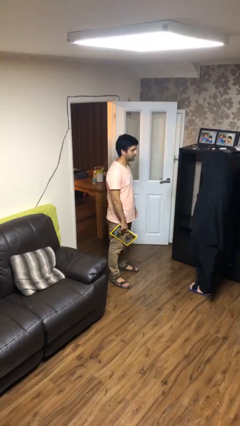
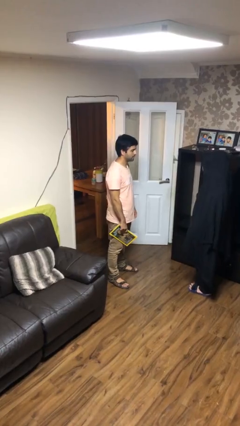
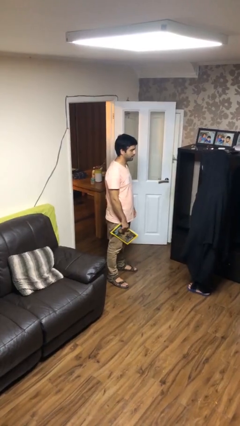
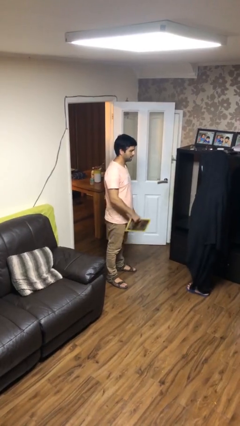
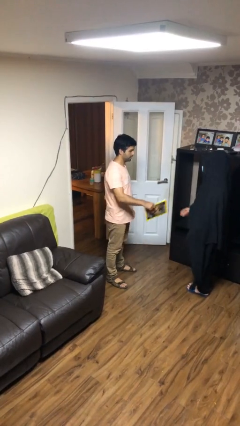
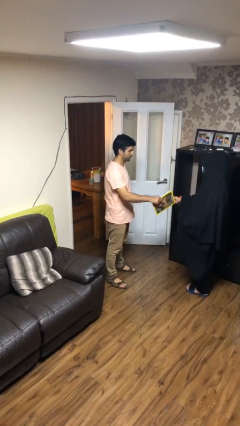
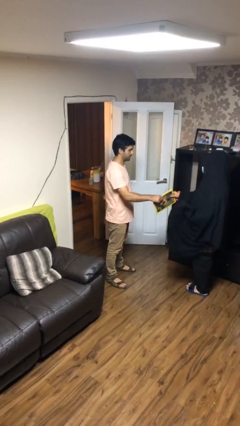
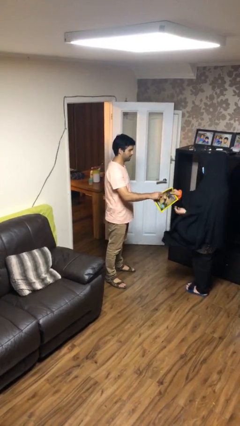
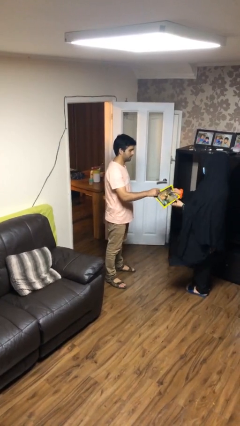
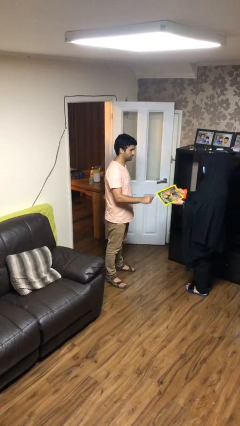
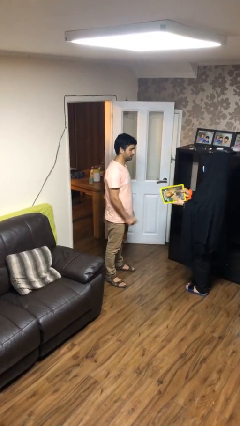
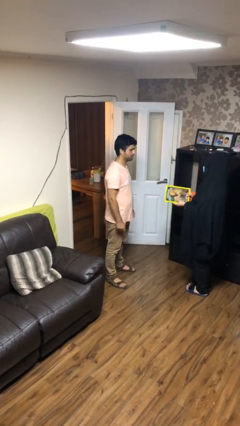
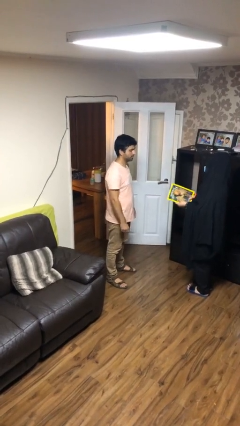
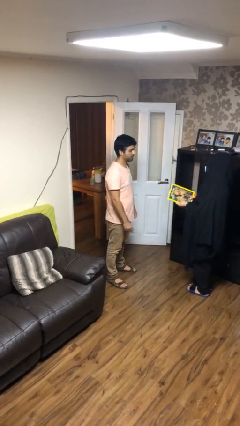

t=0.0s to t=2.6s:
person transfers object to person

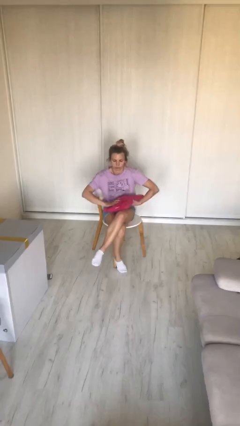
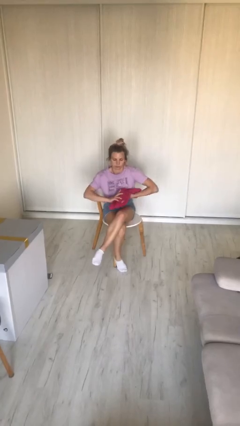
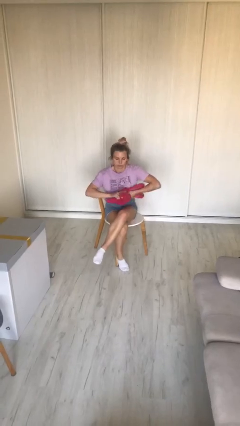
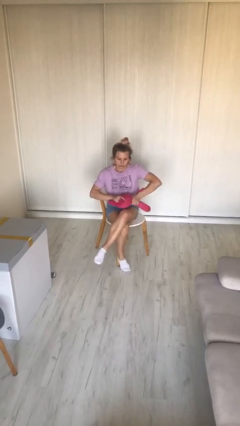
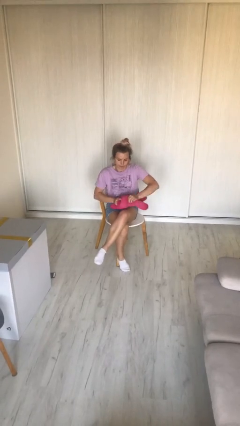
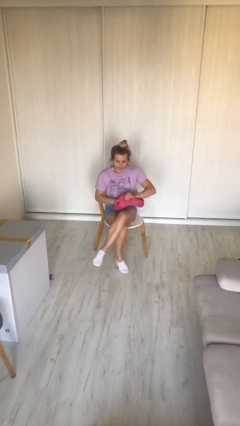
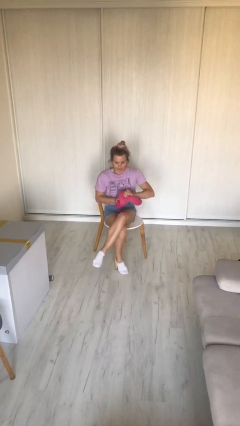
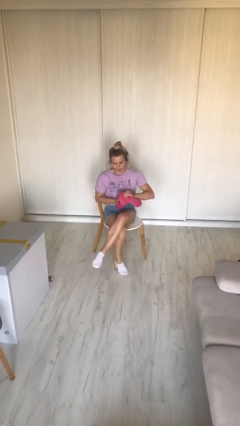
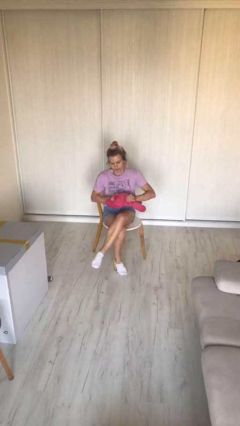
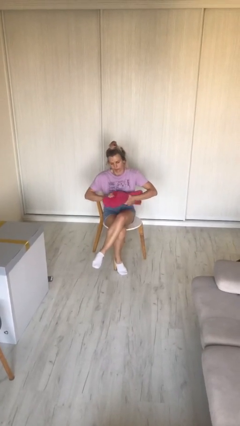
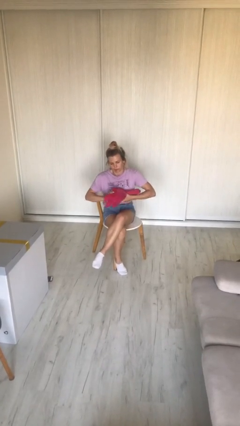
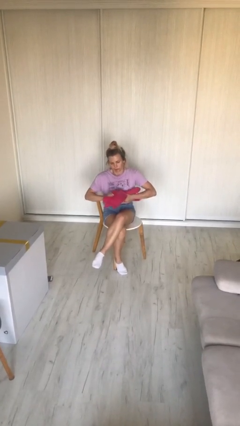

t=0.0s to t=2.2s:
person squeezes object

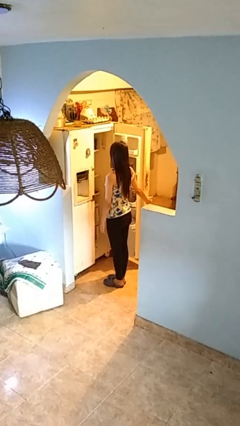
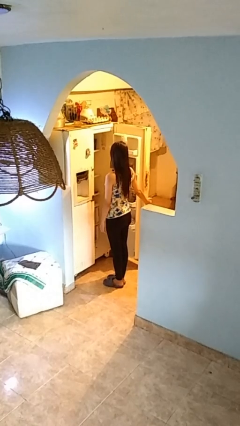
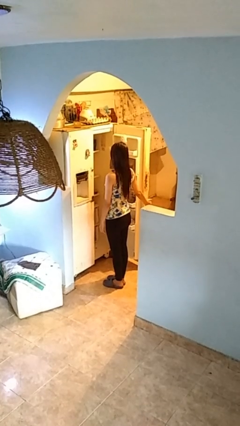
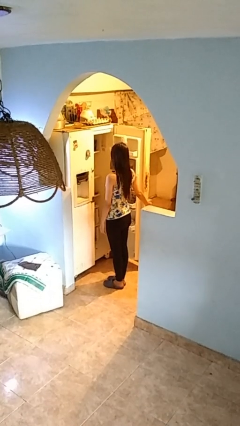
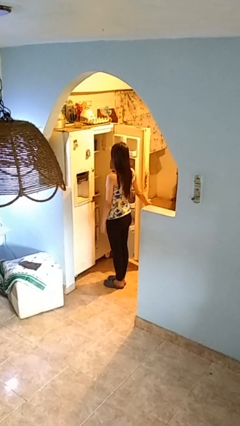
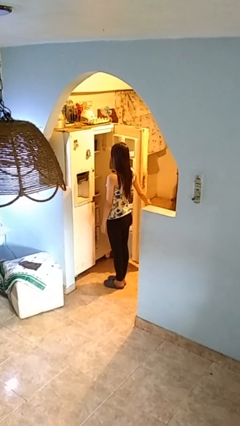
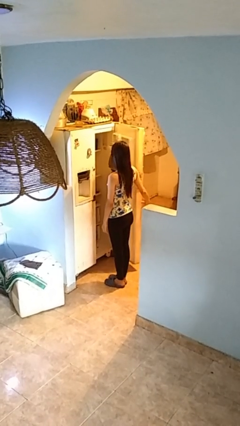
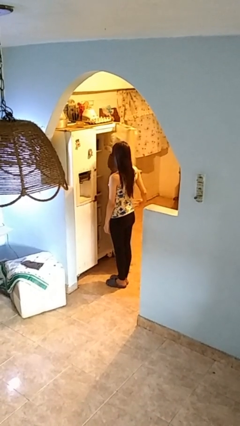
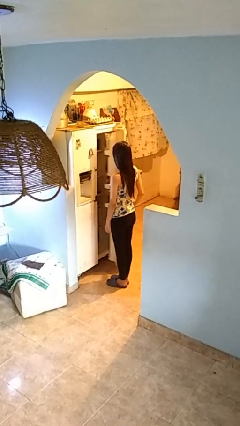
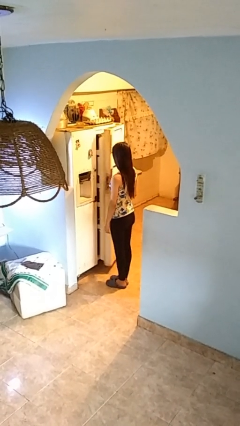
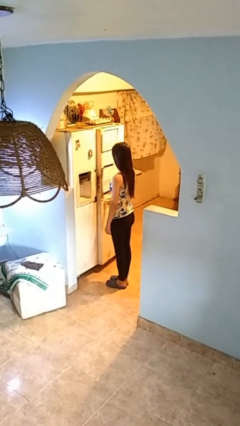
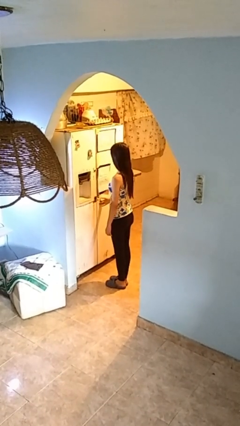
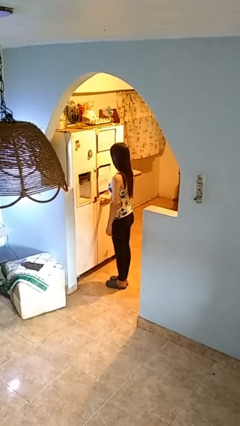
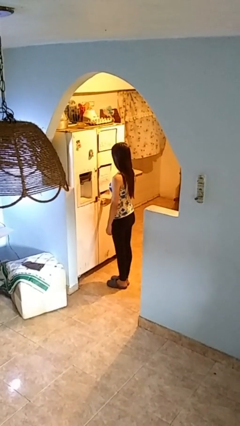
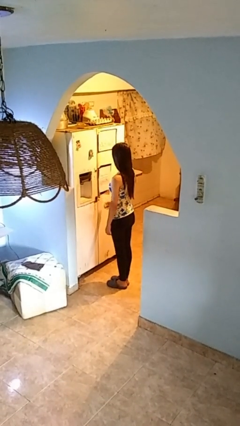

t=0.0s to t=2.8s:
person closes refrigerator

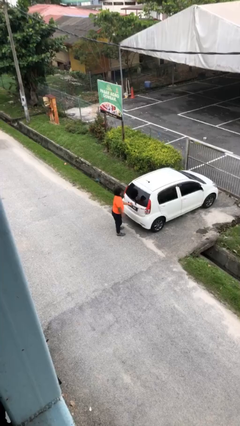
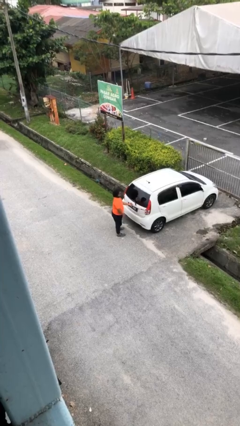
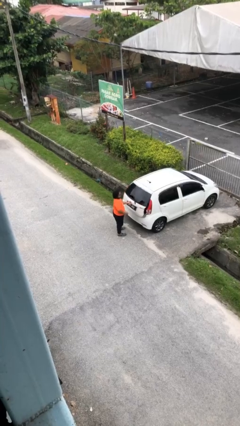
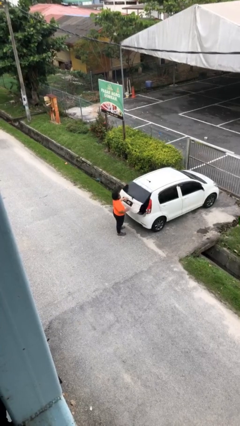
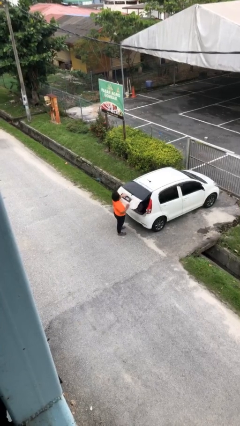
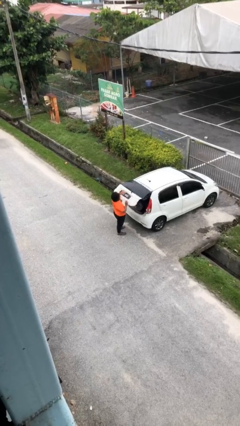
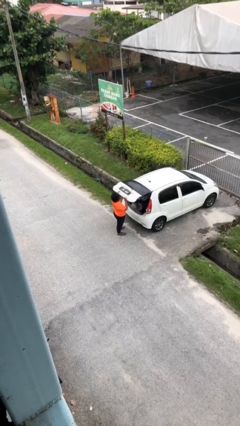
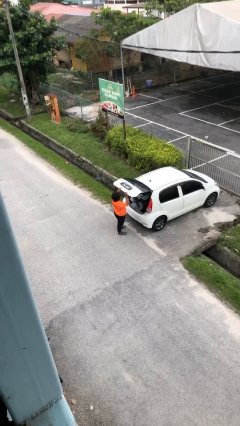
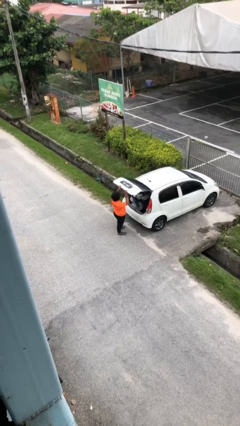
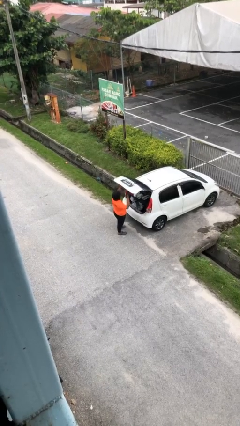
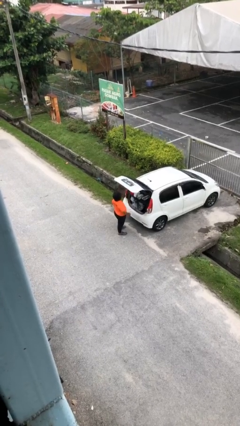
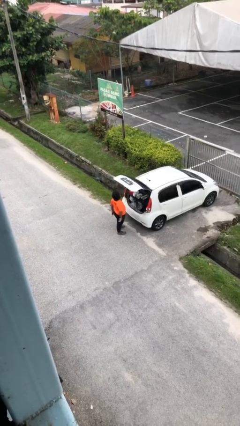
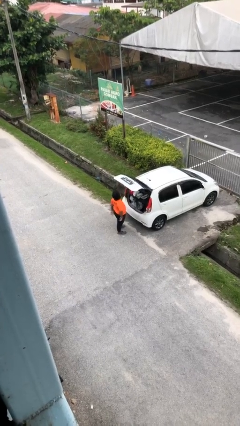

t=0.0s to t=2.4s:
person opens car trunk

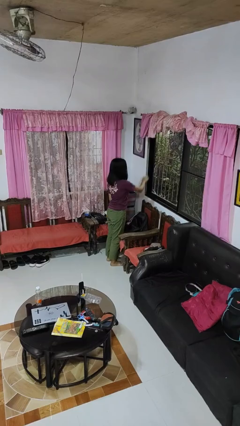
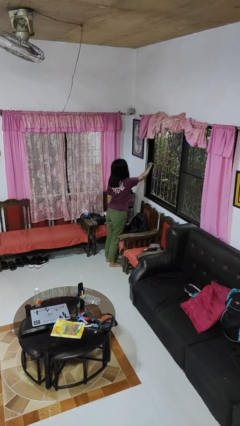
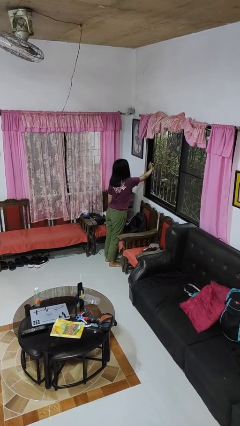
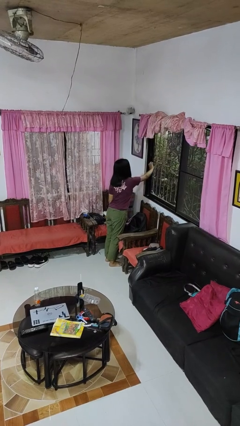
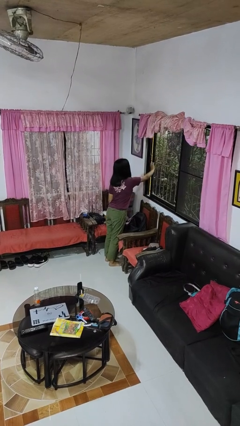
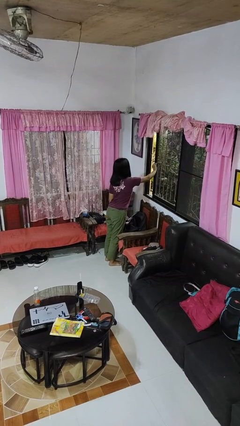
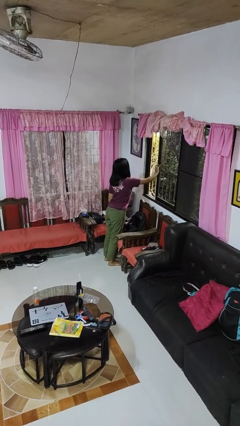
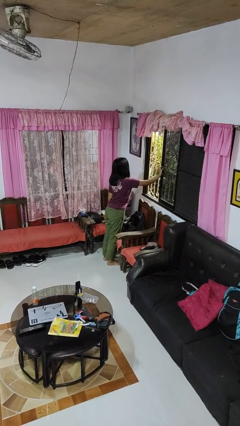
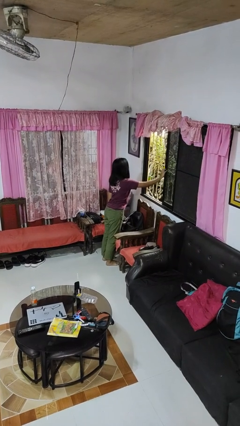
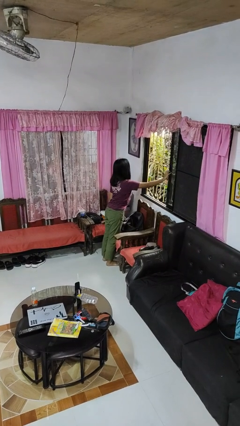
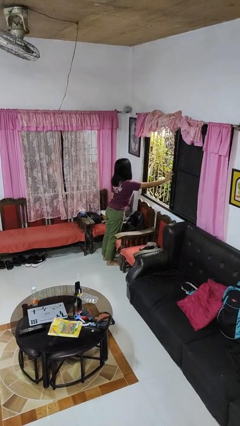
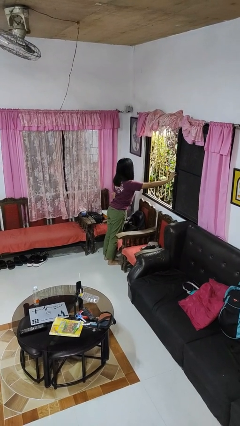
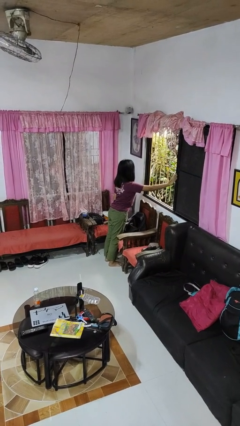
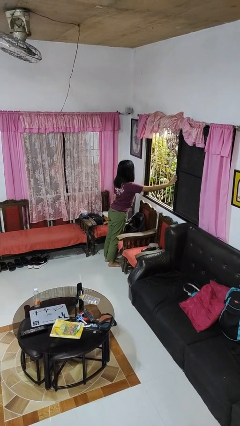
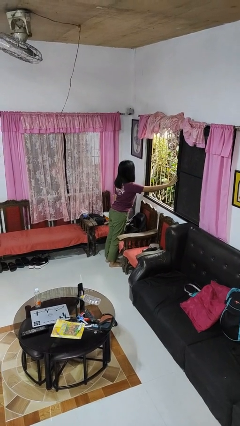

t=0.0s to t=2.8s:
person opens home window

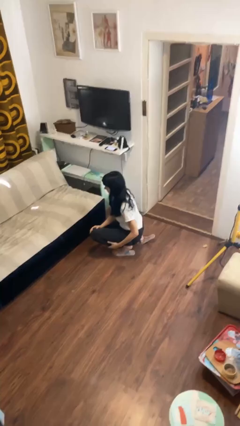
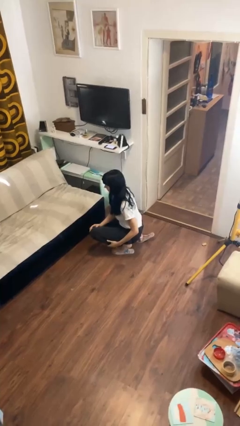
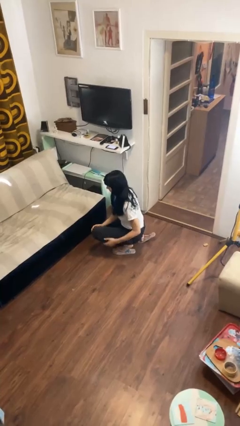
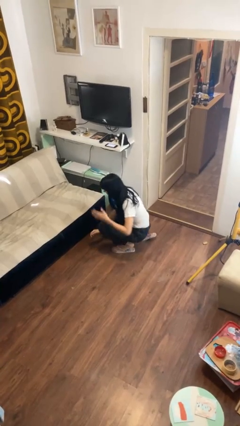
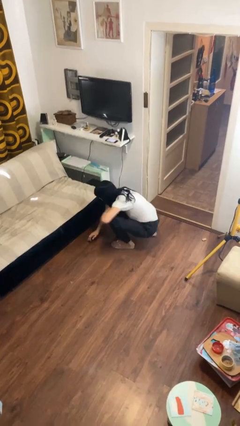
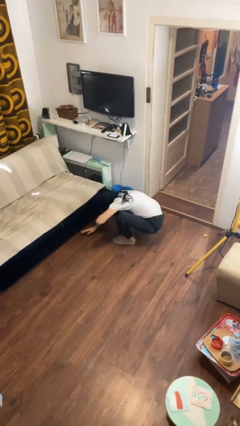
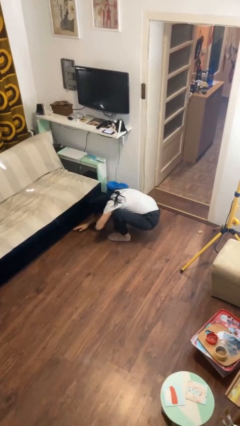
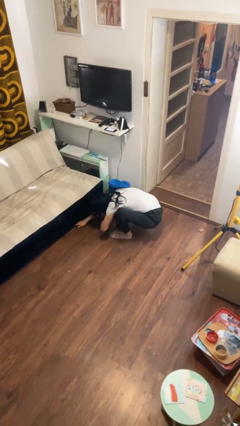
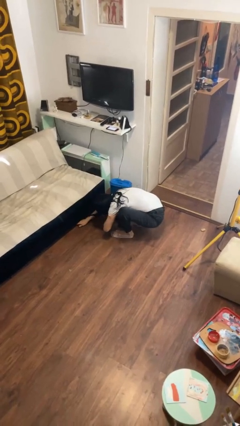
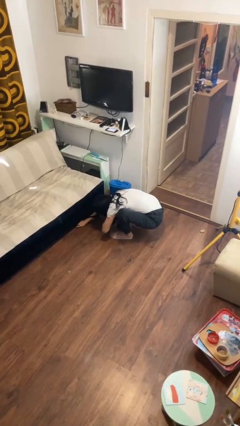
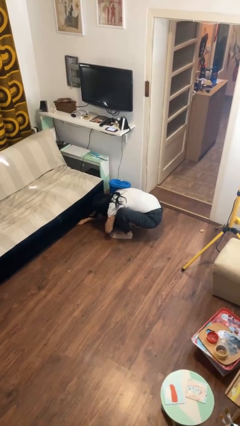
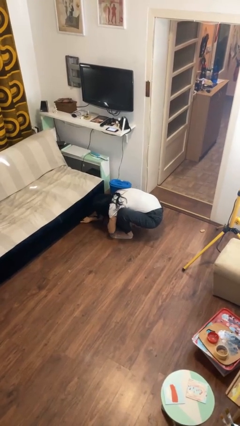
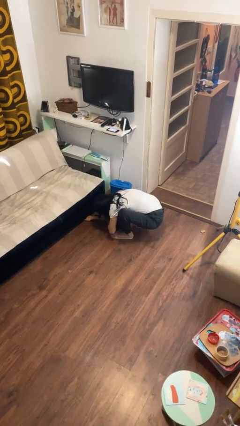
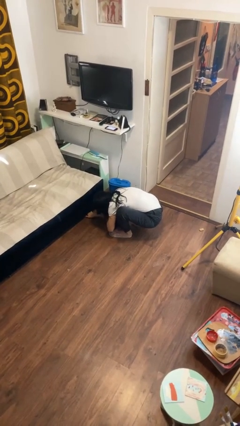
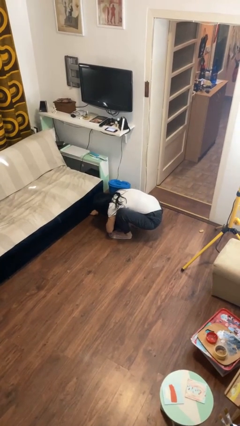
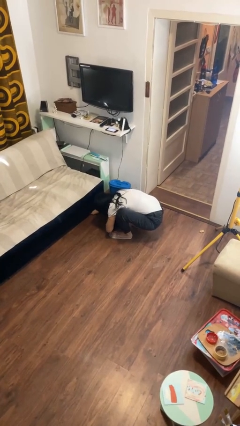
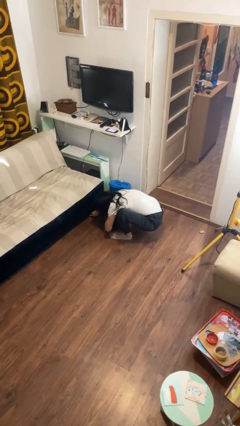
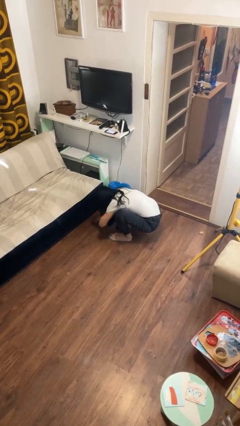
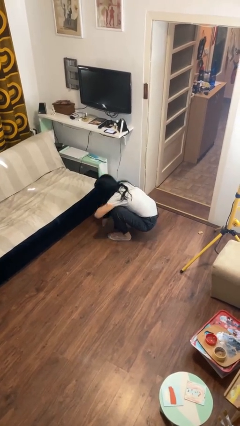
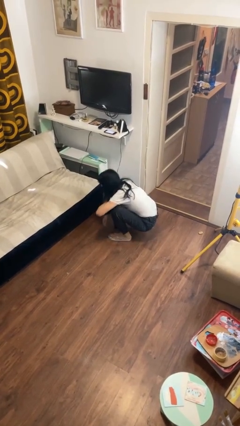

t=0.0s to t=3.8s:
person searches under couch

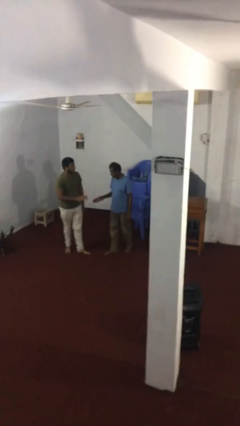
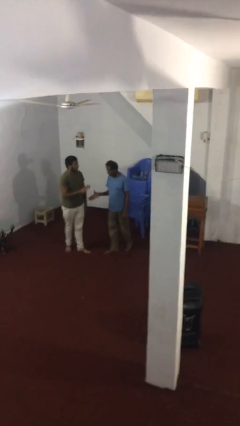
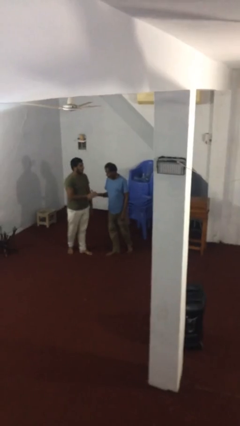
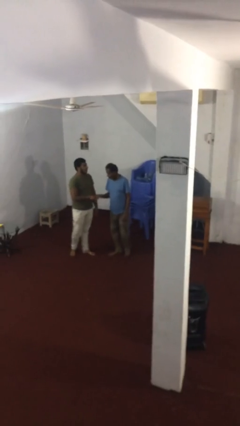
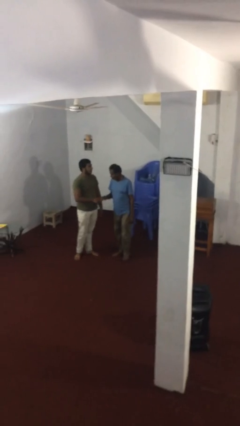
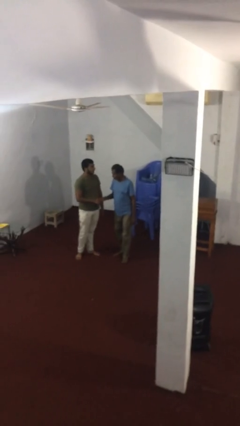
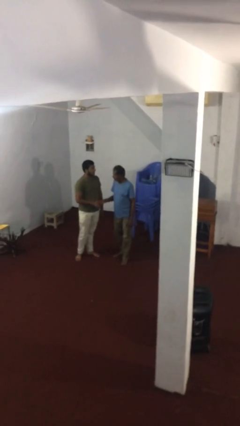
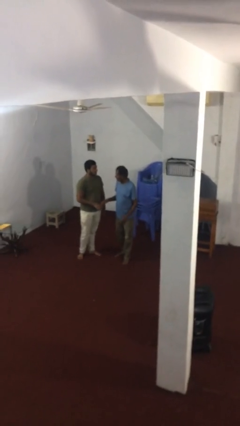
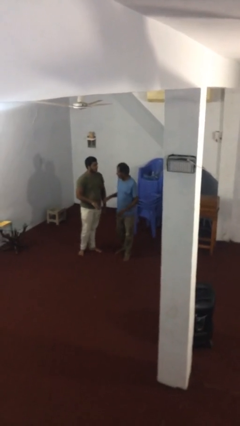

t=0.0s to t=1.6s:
person shakes hand
